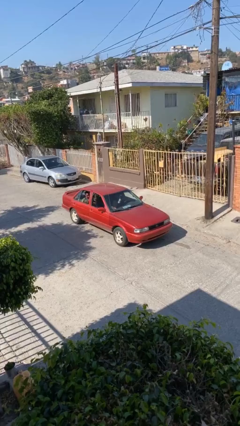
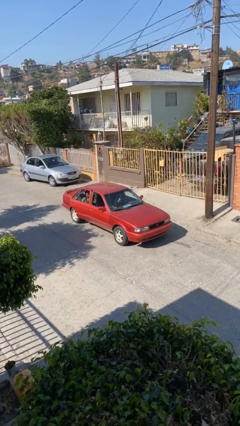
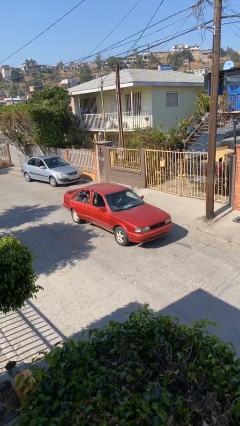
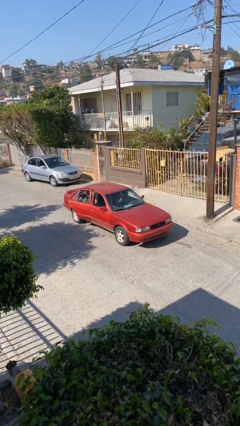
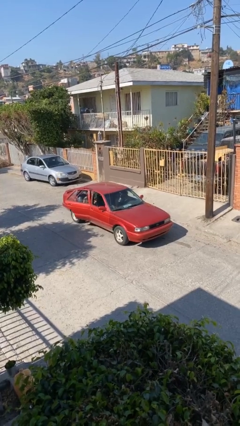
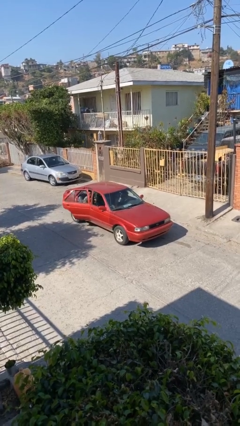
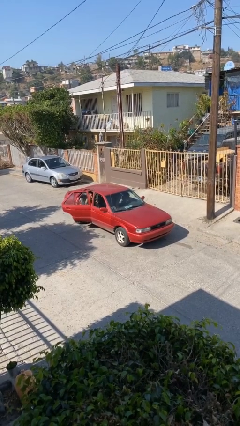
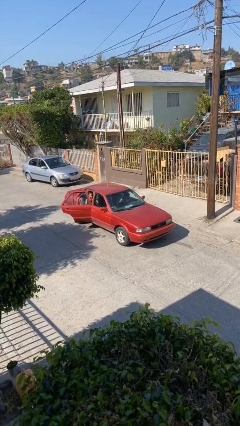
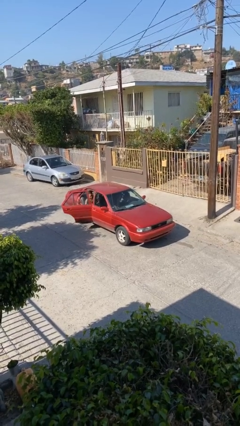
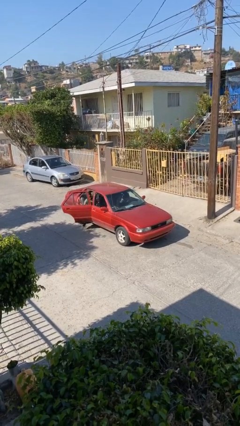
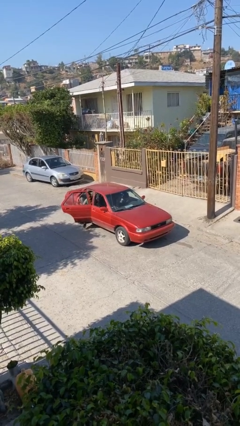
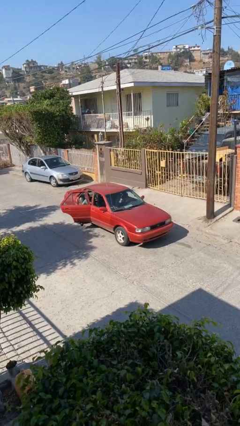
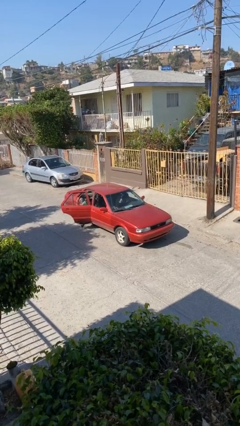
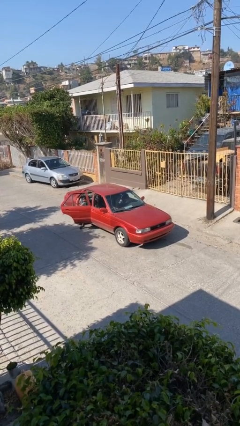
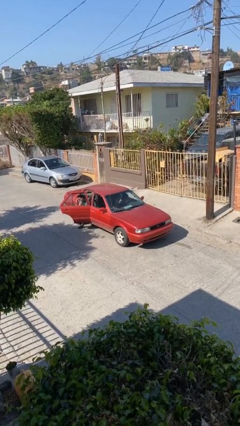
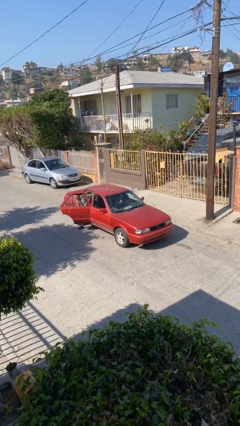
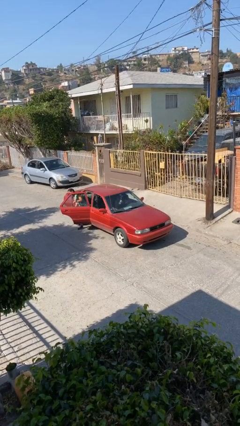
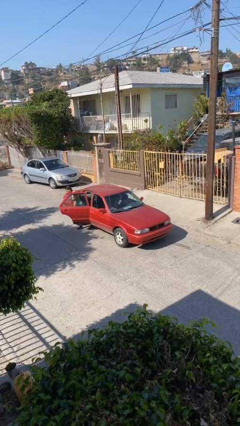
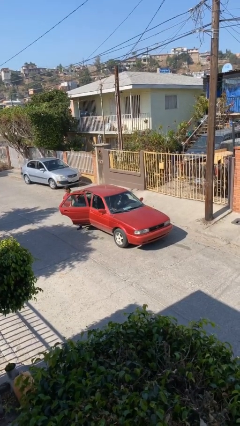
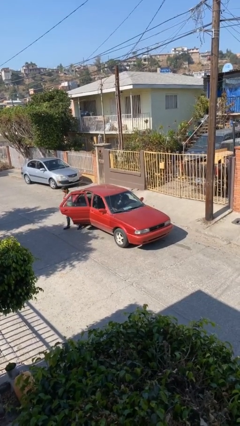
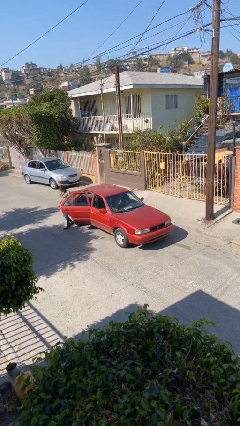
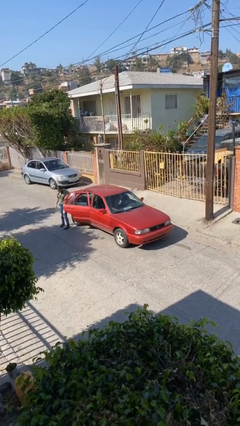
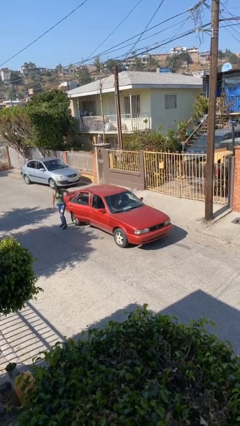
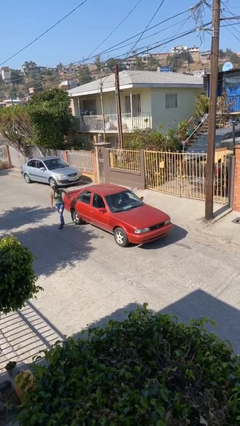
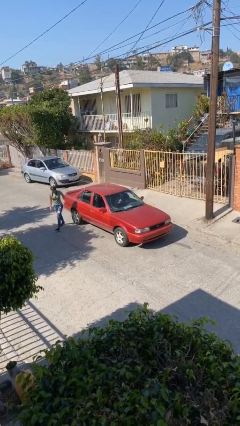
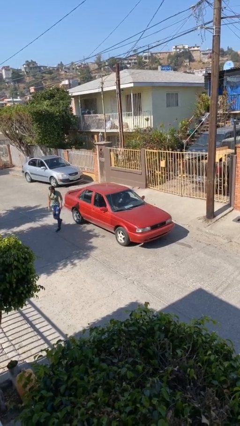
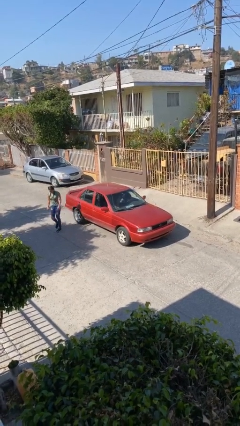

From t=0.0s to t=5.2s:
car drops off person

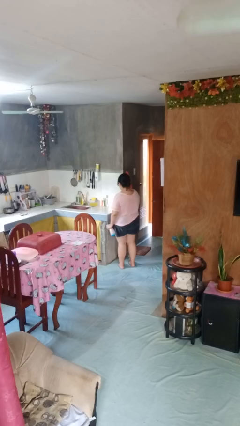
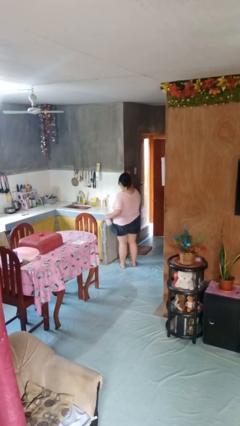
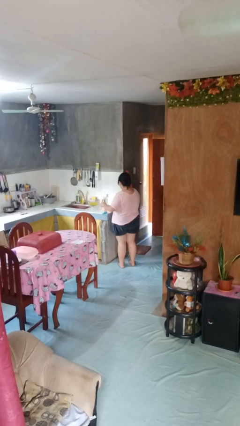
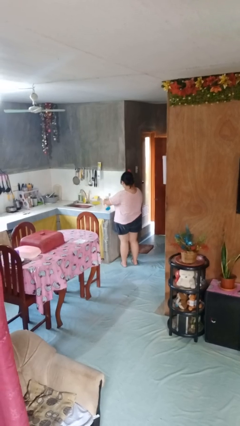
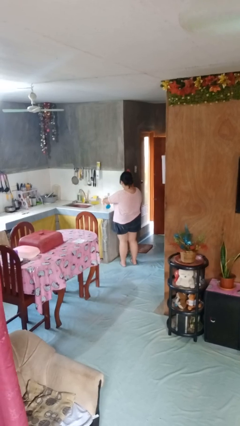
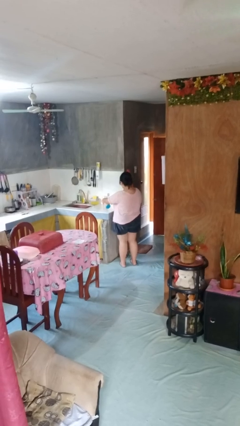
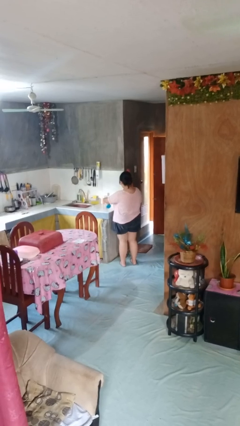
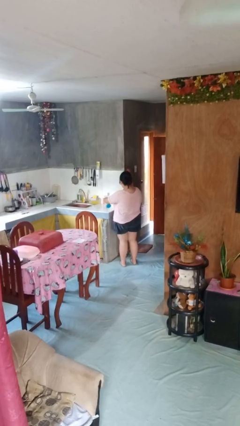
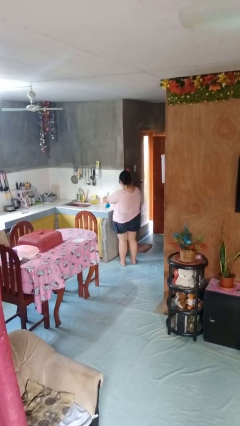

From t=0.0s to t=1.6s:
person sprays from bottle

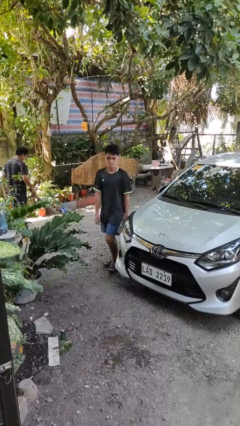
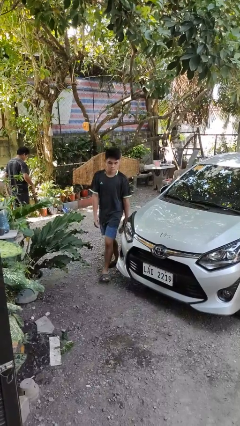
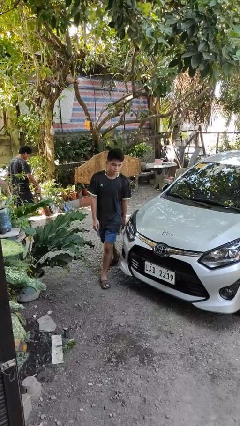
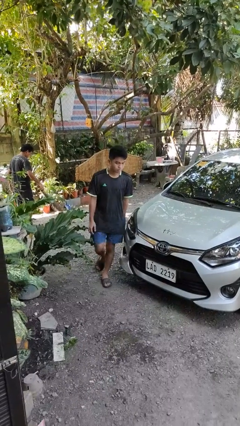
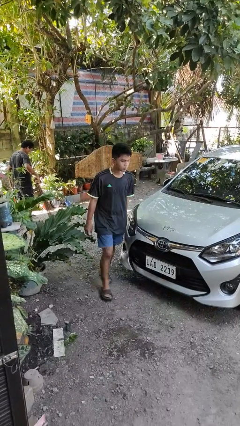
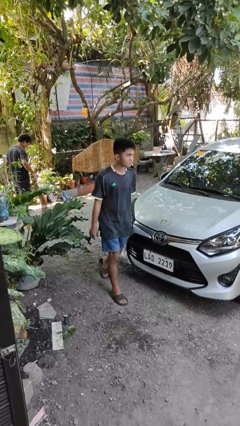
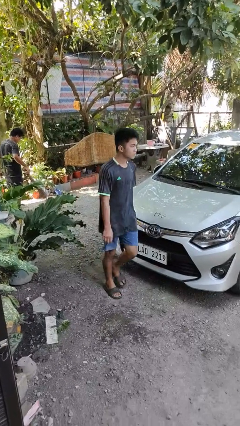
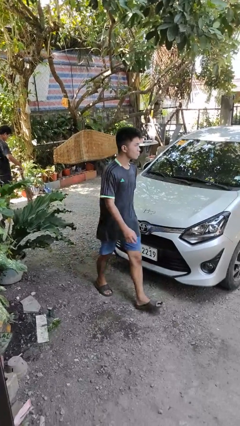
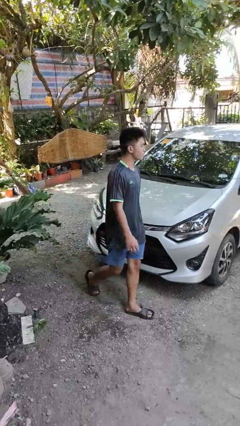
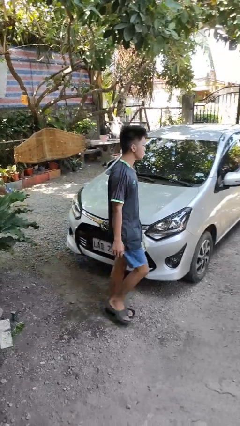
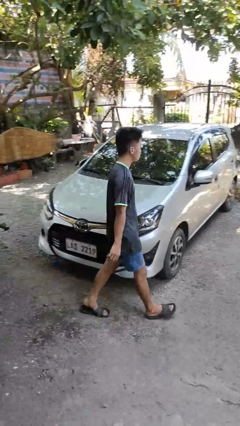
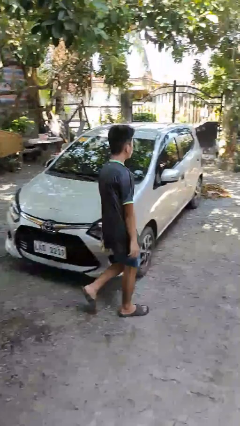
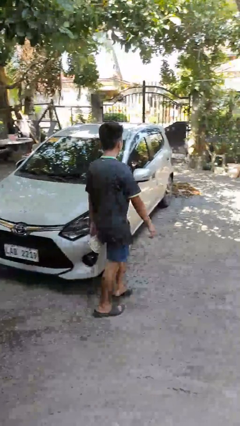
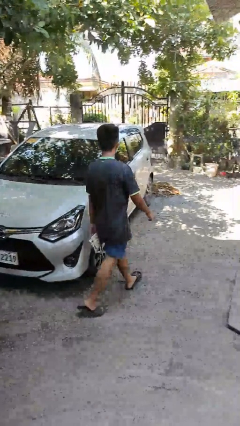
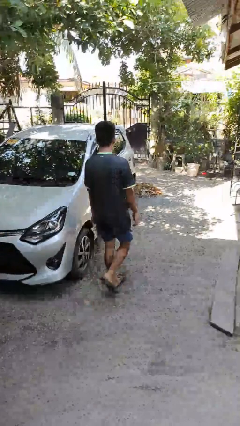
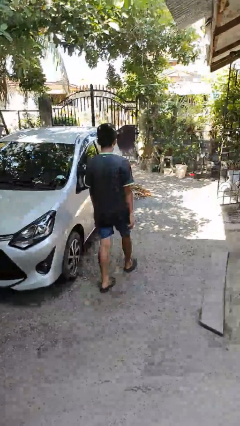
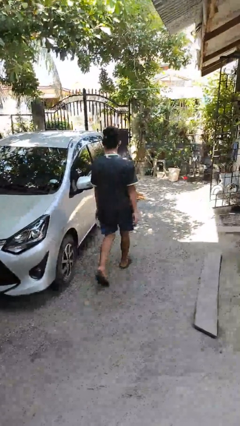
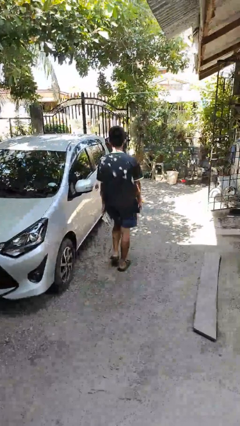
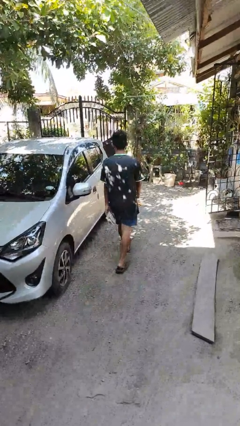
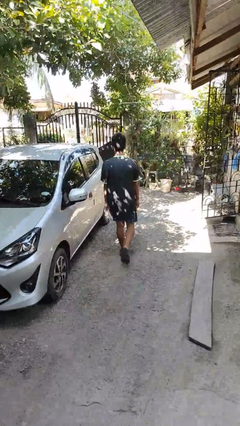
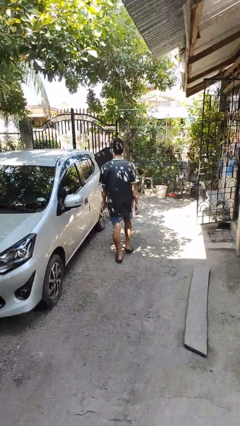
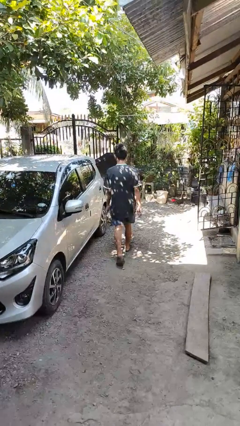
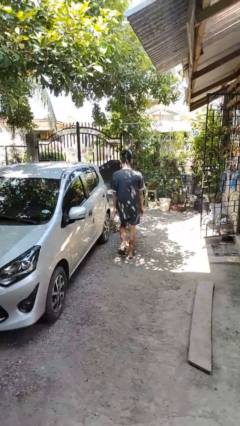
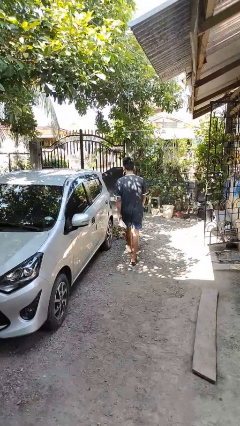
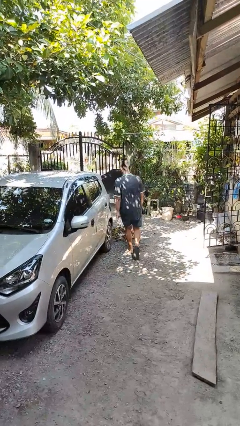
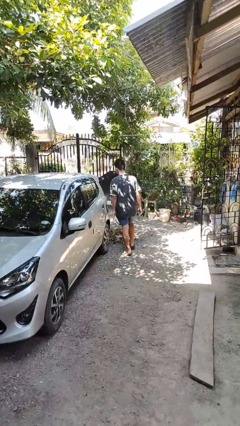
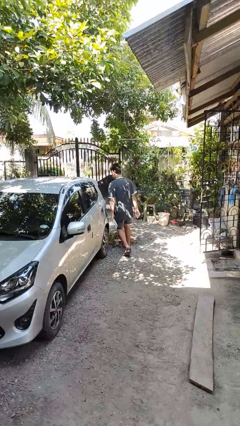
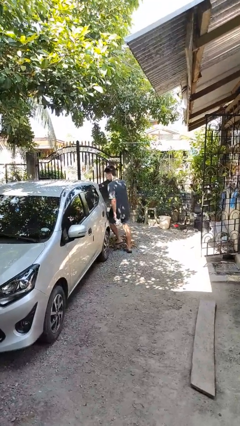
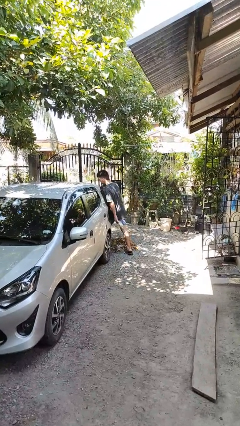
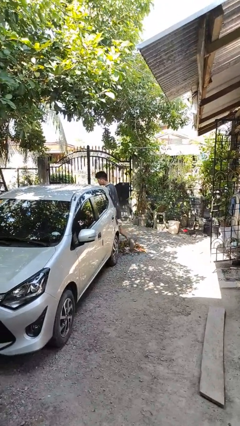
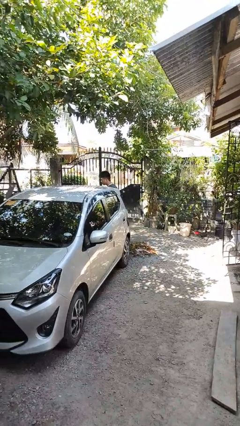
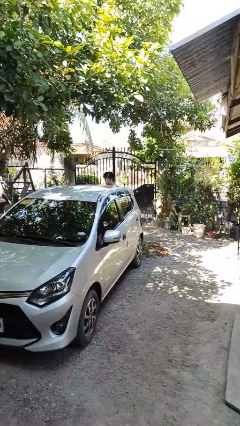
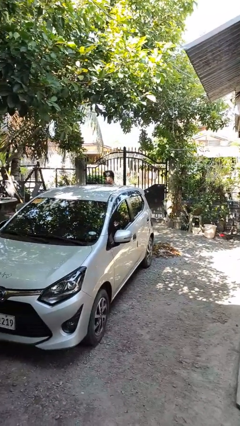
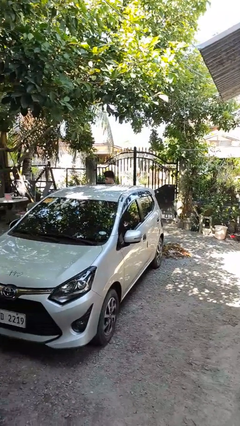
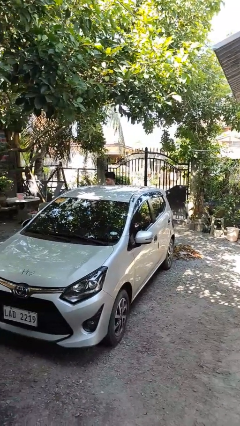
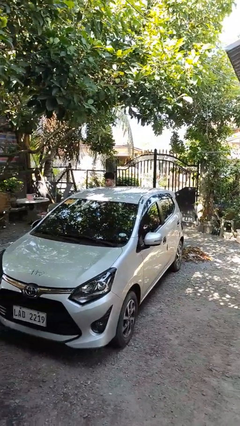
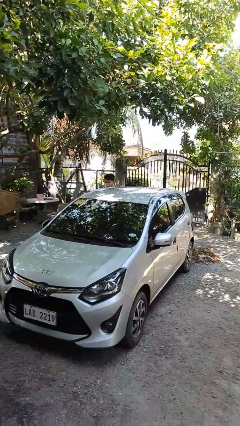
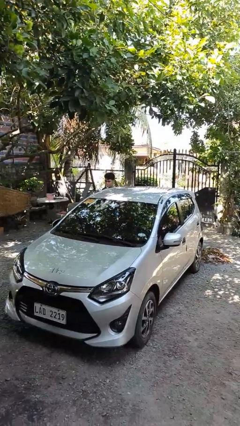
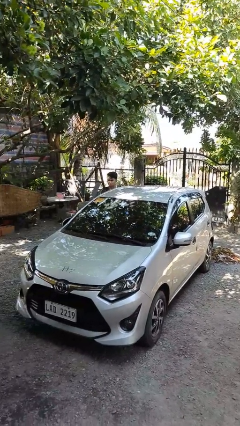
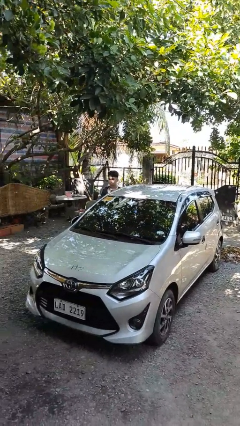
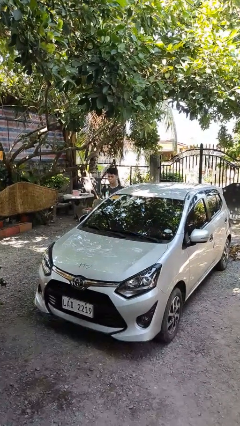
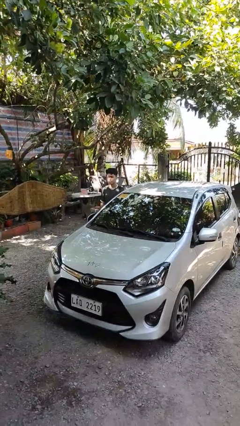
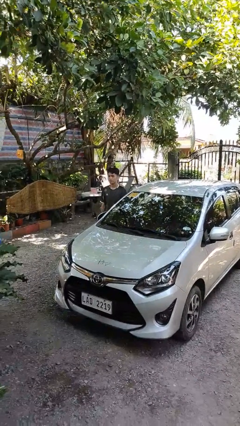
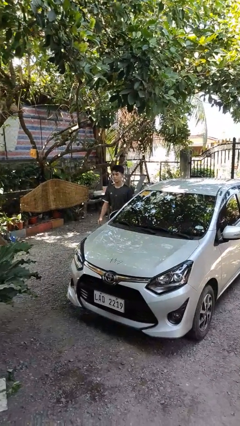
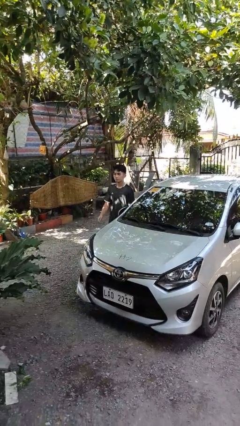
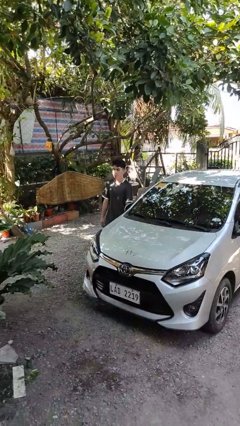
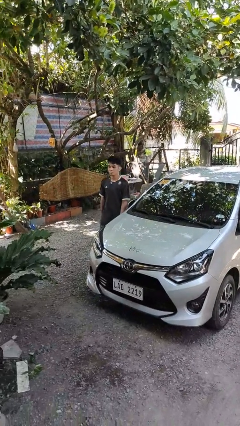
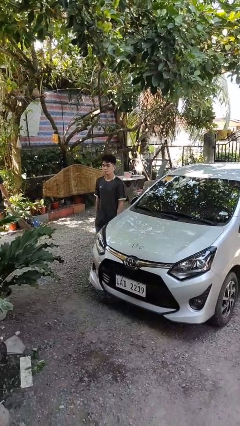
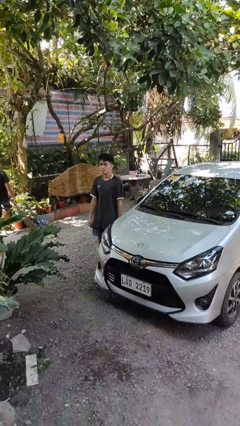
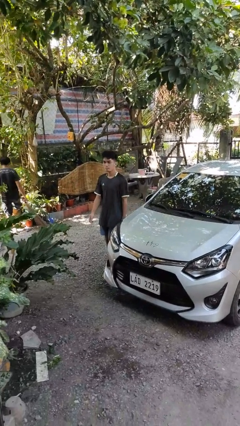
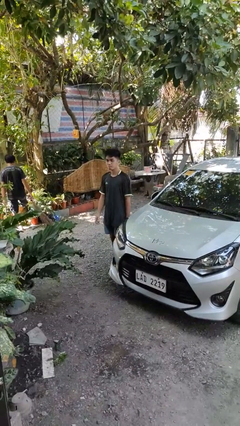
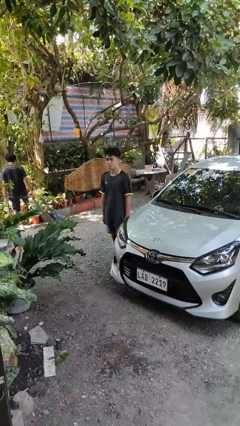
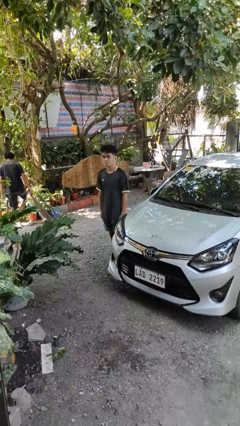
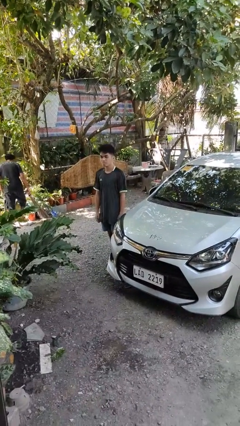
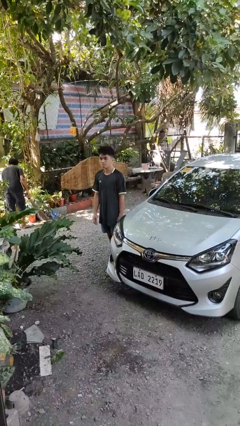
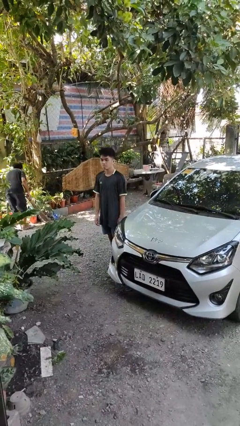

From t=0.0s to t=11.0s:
person walks around car

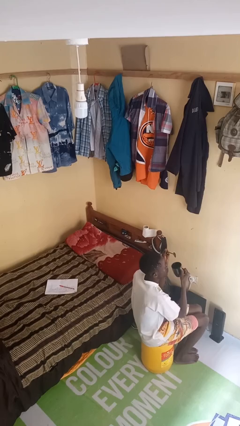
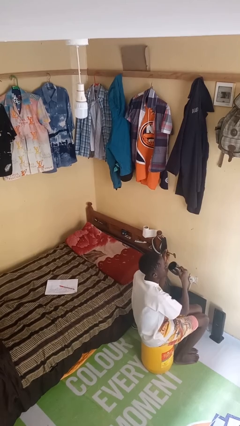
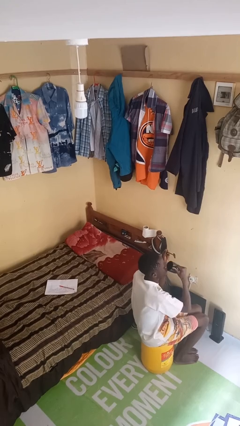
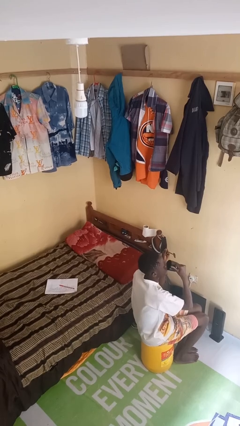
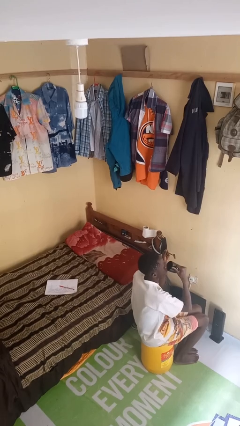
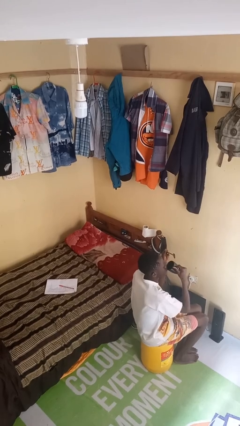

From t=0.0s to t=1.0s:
person drinks from mug
